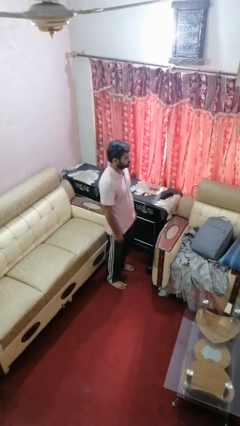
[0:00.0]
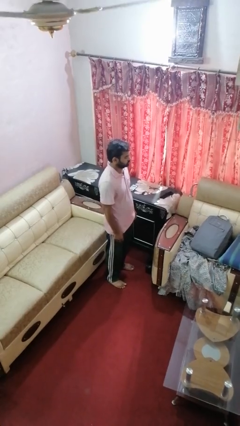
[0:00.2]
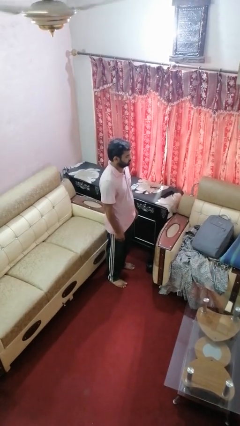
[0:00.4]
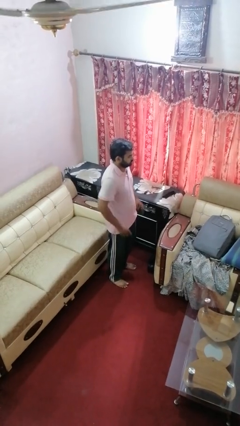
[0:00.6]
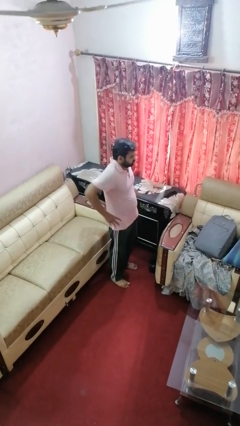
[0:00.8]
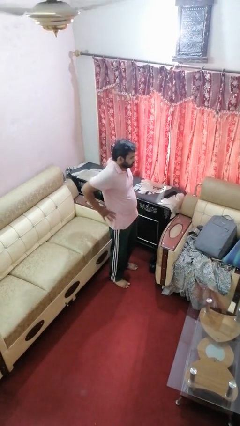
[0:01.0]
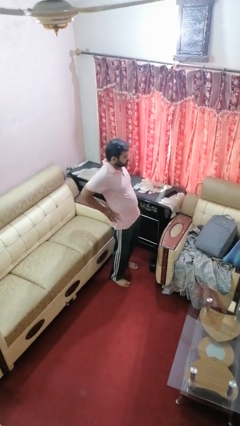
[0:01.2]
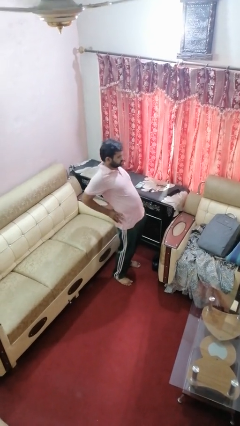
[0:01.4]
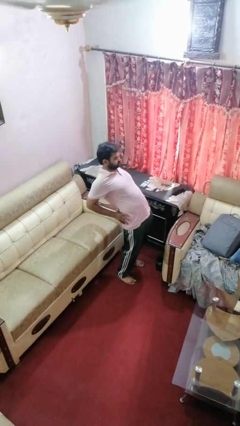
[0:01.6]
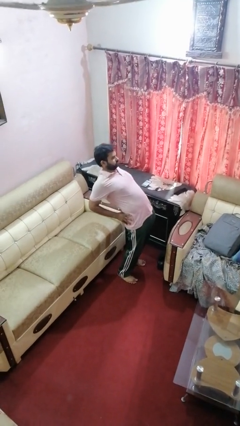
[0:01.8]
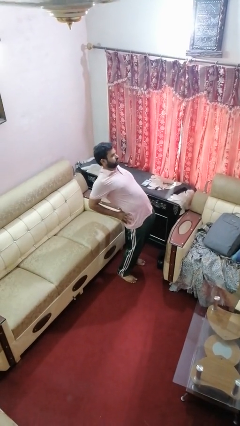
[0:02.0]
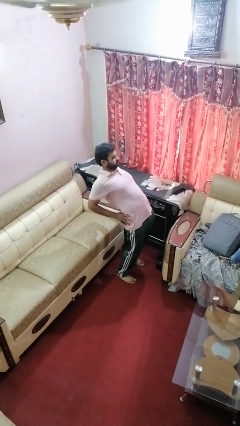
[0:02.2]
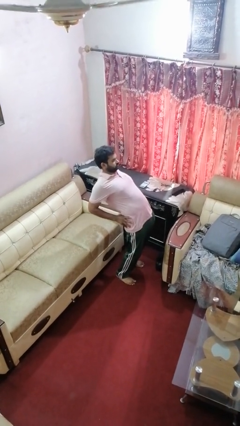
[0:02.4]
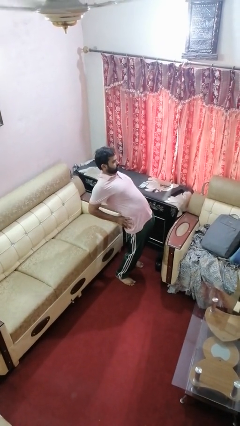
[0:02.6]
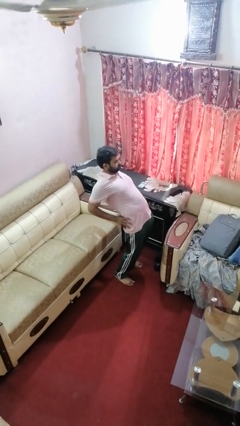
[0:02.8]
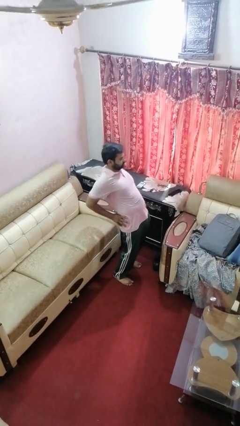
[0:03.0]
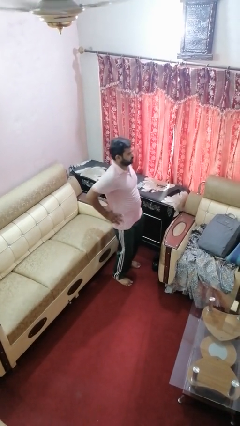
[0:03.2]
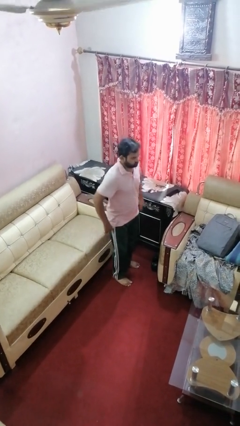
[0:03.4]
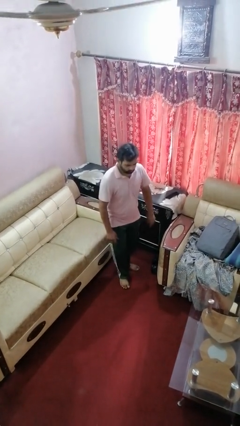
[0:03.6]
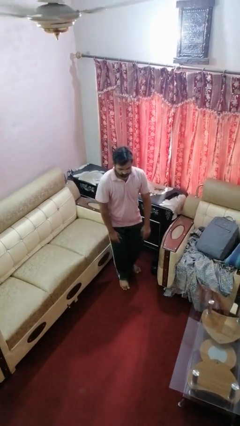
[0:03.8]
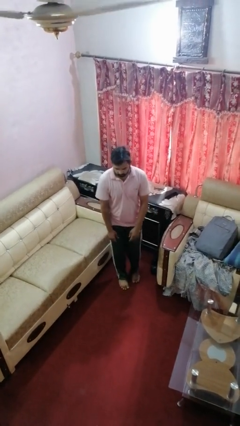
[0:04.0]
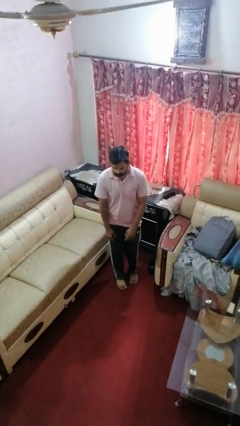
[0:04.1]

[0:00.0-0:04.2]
person stretches back

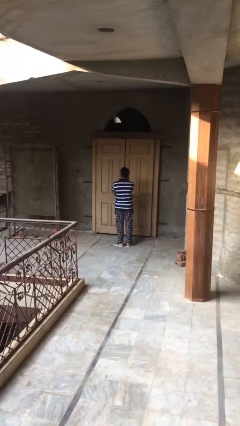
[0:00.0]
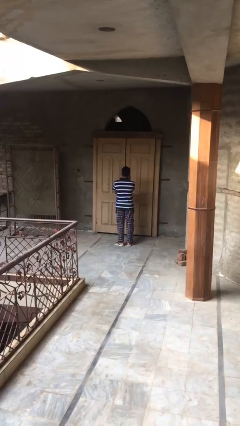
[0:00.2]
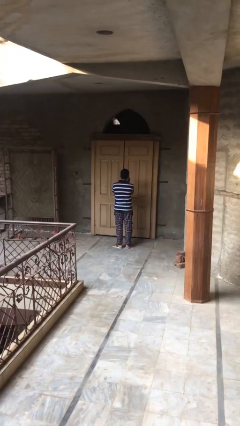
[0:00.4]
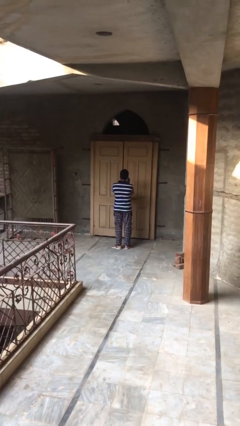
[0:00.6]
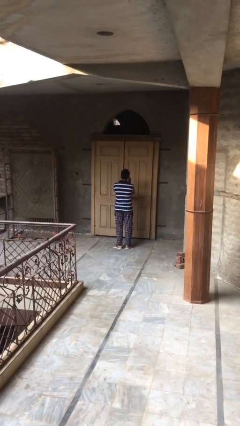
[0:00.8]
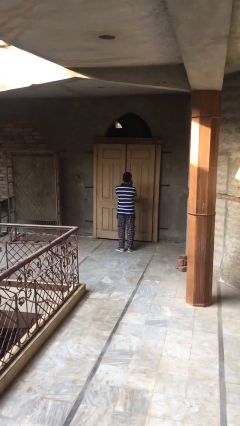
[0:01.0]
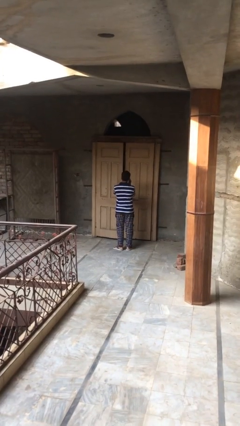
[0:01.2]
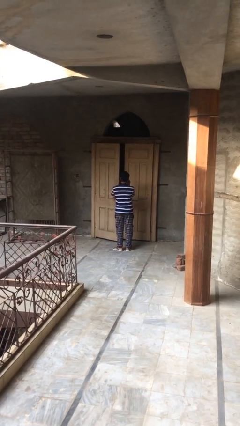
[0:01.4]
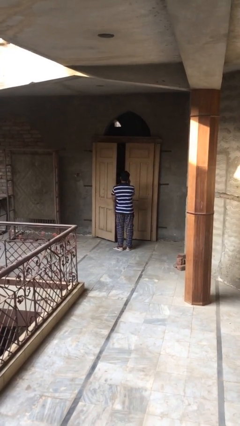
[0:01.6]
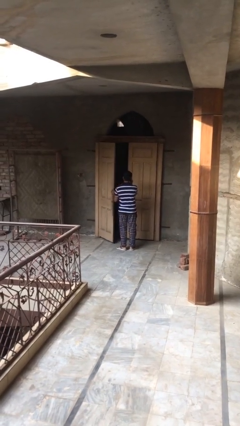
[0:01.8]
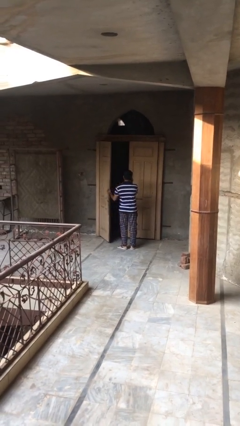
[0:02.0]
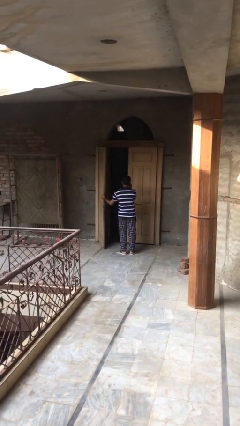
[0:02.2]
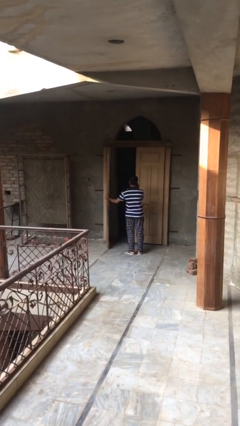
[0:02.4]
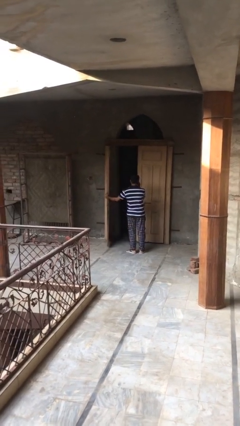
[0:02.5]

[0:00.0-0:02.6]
person opens facility door

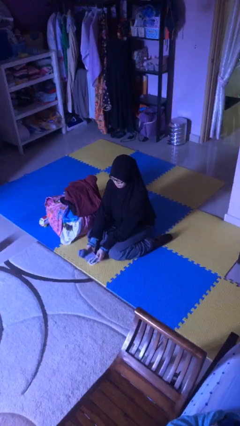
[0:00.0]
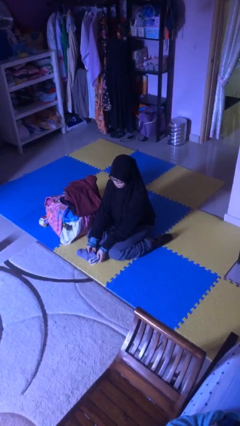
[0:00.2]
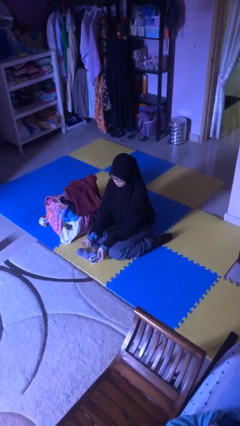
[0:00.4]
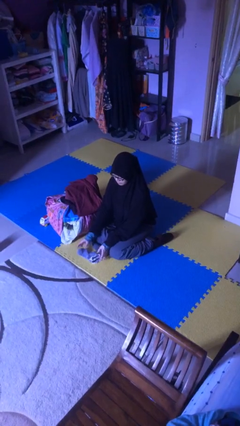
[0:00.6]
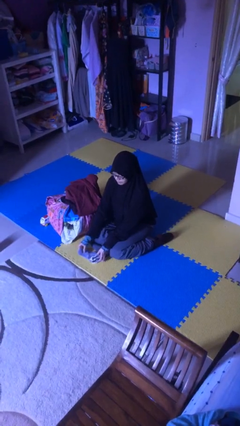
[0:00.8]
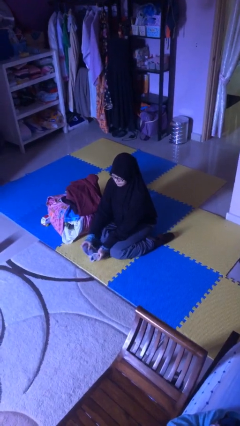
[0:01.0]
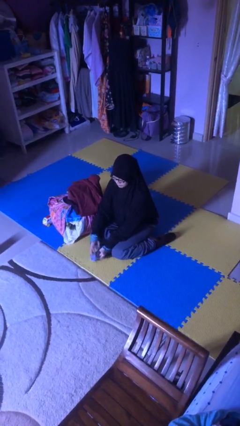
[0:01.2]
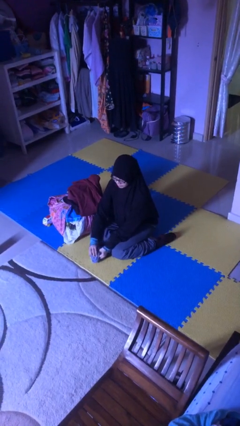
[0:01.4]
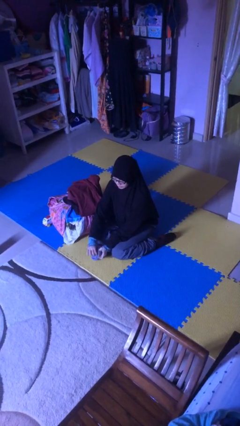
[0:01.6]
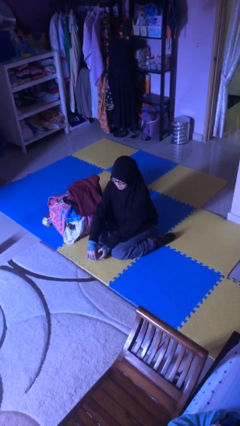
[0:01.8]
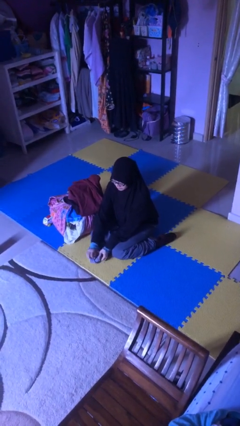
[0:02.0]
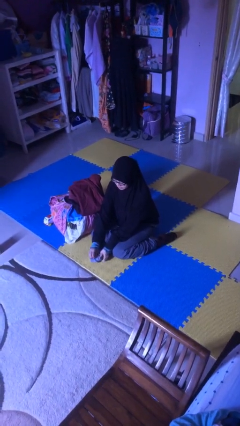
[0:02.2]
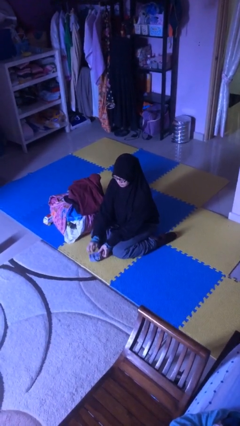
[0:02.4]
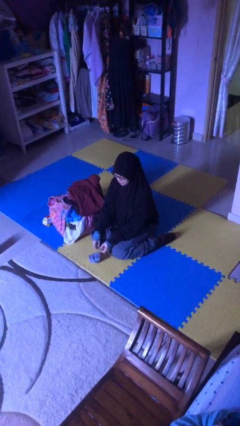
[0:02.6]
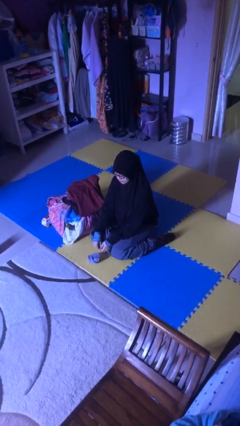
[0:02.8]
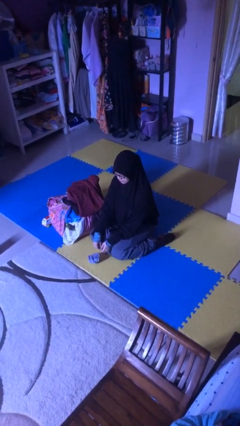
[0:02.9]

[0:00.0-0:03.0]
person folds socks

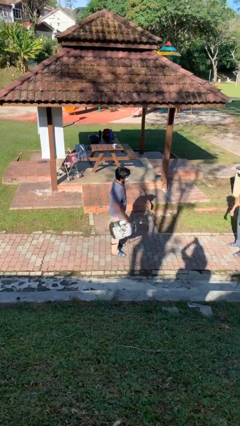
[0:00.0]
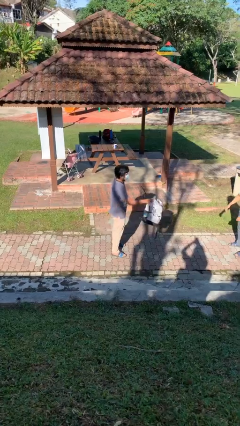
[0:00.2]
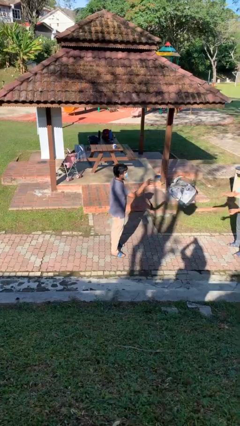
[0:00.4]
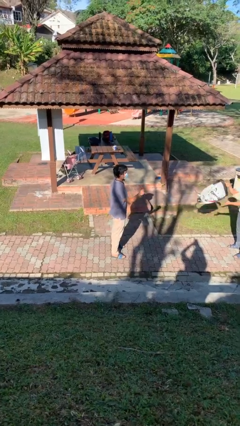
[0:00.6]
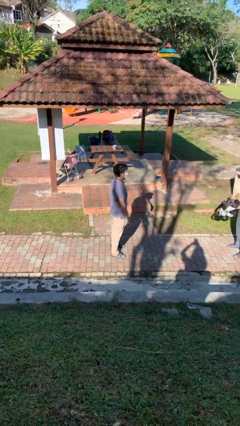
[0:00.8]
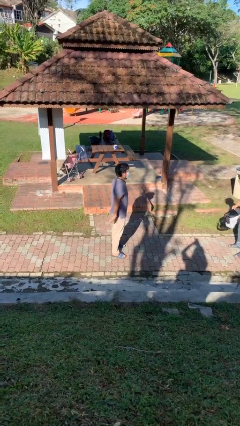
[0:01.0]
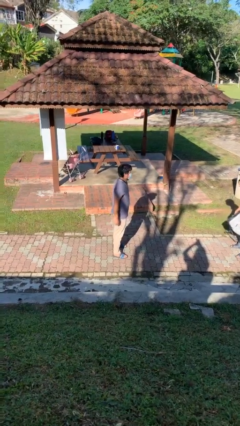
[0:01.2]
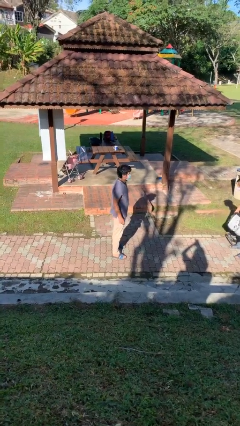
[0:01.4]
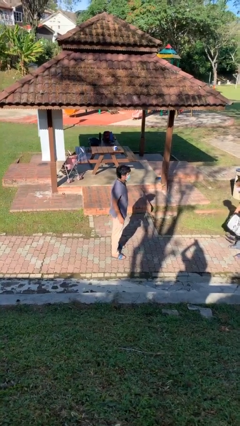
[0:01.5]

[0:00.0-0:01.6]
person throws object to person

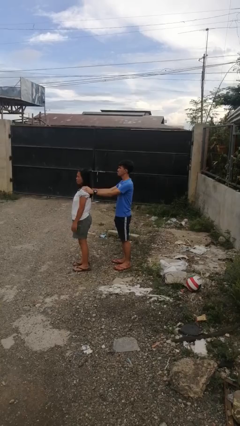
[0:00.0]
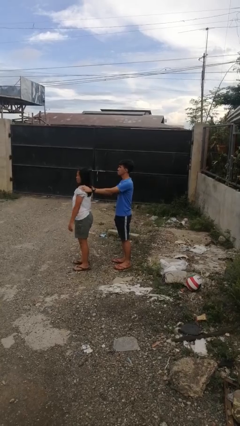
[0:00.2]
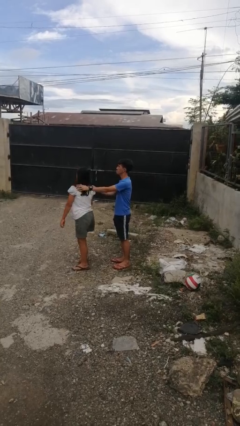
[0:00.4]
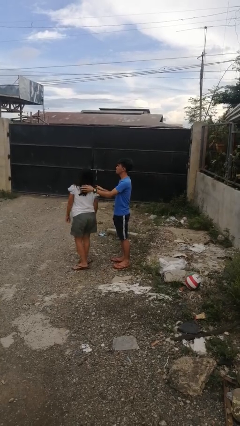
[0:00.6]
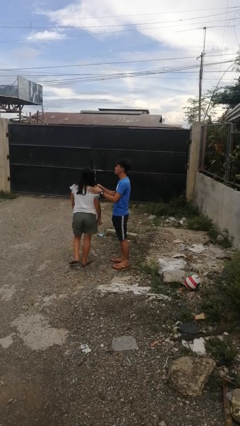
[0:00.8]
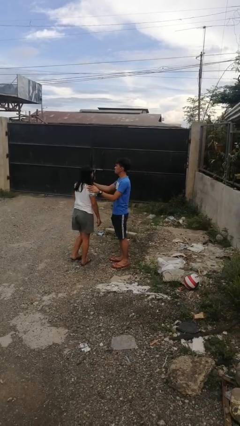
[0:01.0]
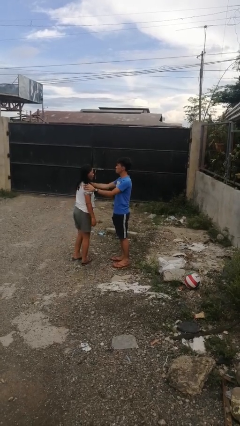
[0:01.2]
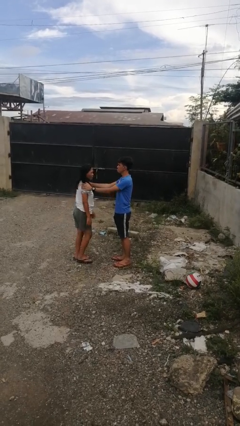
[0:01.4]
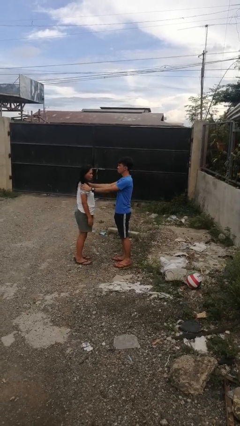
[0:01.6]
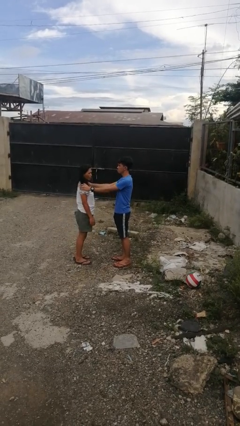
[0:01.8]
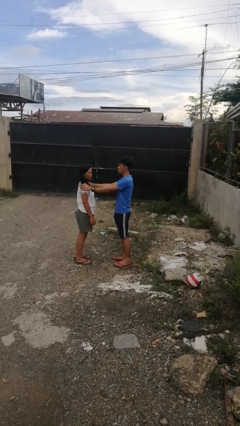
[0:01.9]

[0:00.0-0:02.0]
person spins person around

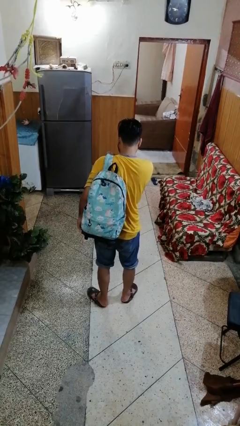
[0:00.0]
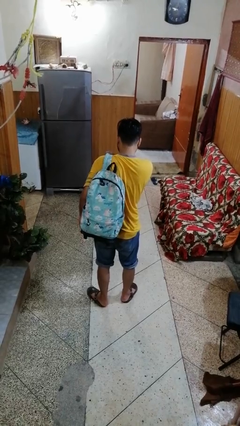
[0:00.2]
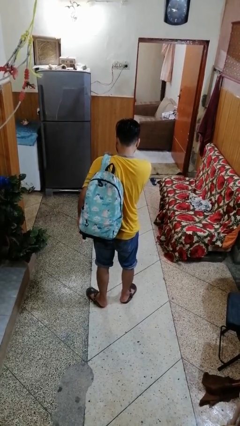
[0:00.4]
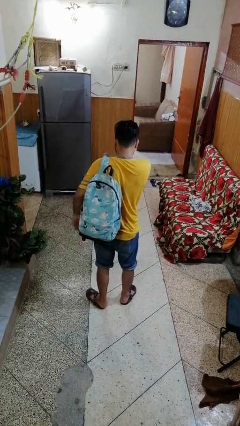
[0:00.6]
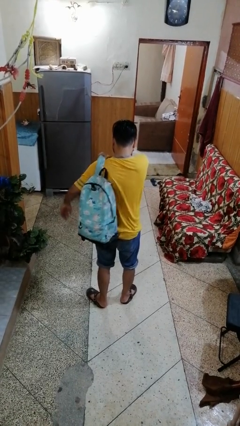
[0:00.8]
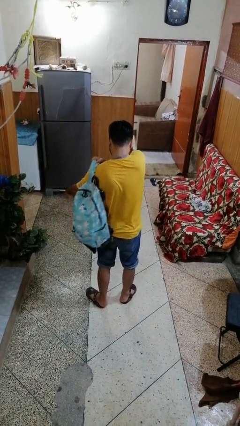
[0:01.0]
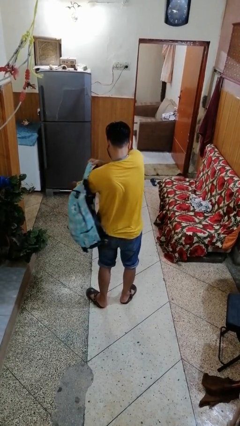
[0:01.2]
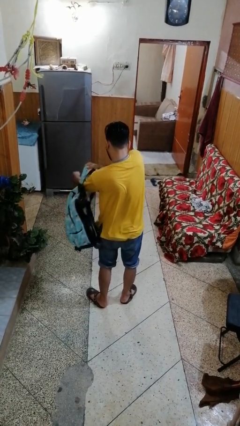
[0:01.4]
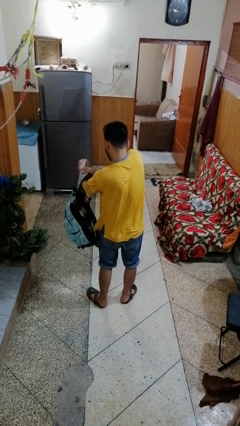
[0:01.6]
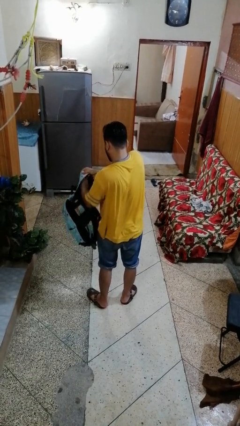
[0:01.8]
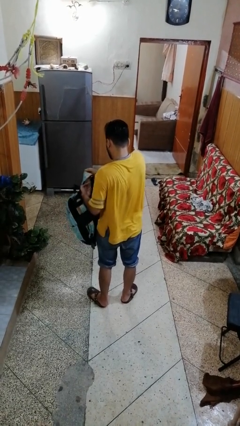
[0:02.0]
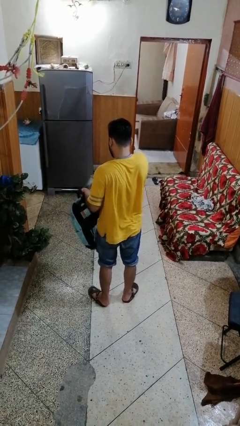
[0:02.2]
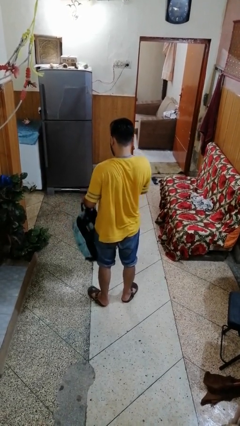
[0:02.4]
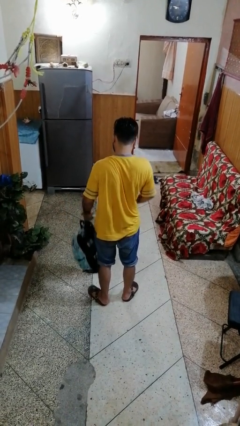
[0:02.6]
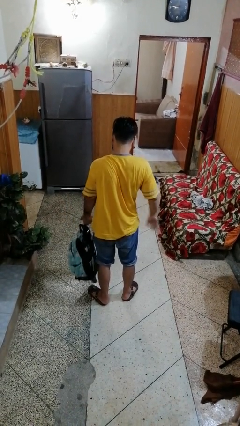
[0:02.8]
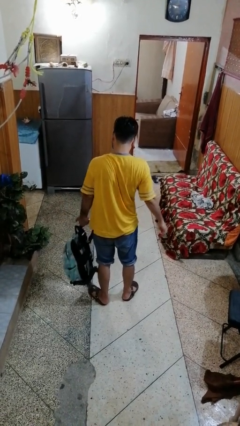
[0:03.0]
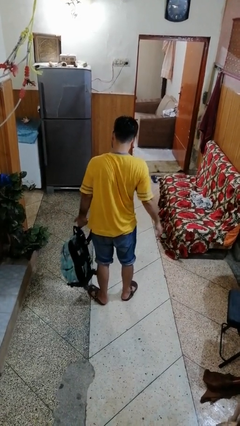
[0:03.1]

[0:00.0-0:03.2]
person takes off backpack

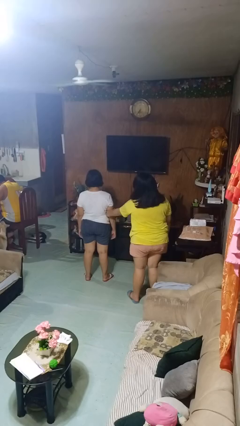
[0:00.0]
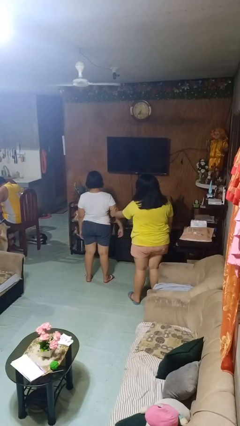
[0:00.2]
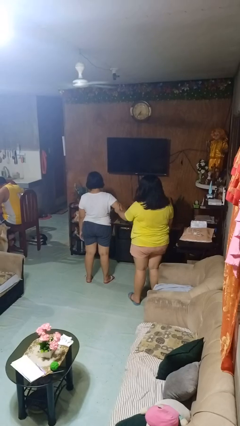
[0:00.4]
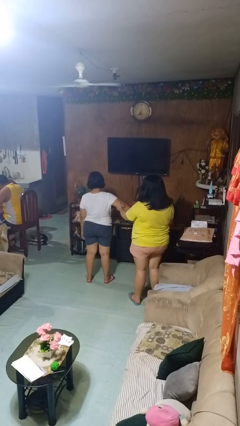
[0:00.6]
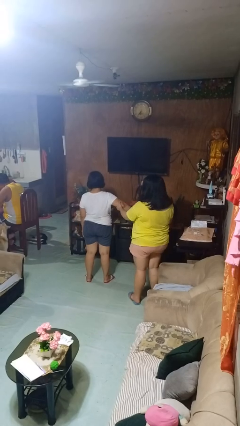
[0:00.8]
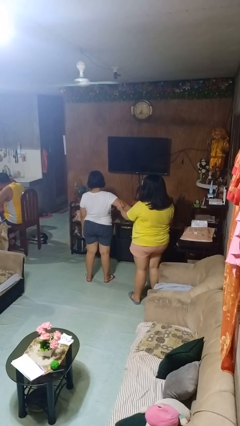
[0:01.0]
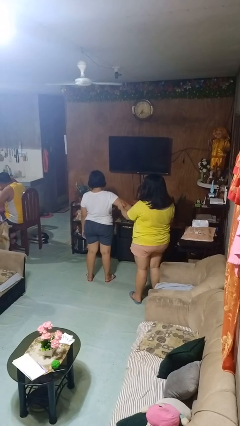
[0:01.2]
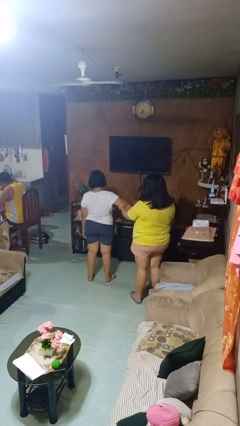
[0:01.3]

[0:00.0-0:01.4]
person grabs person by bicep
